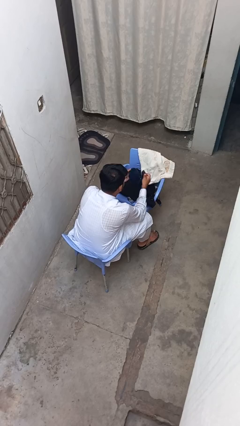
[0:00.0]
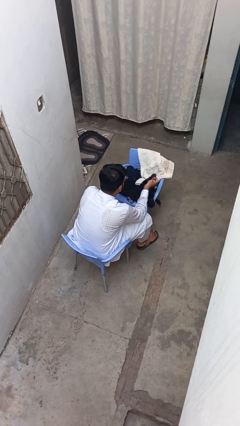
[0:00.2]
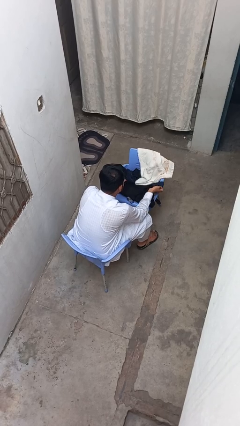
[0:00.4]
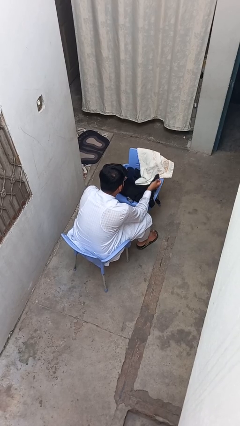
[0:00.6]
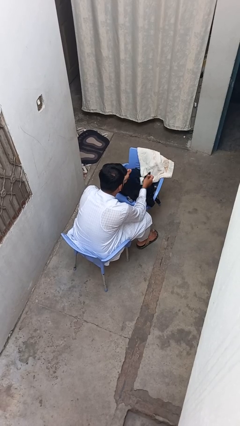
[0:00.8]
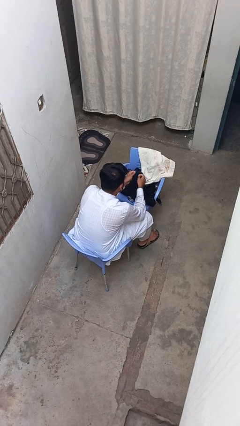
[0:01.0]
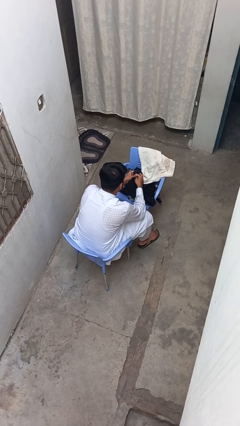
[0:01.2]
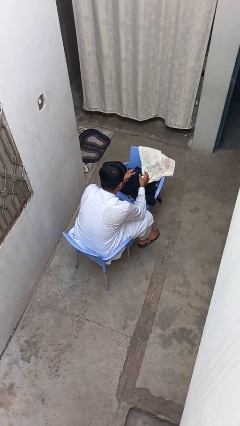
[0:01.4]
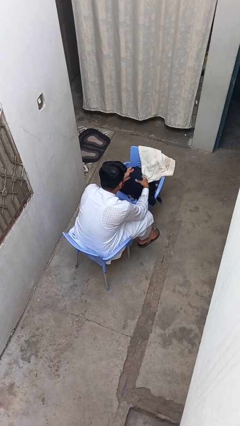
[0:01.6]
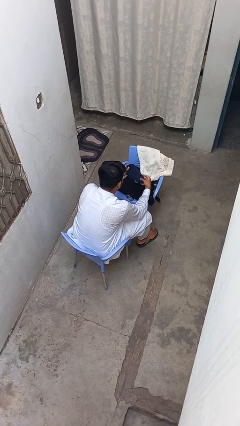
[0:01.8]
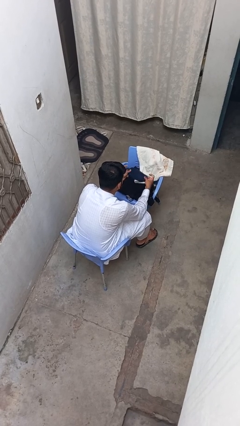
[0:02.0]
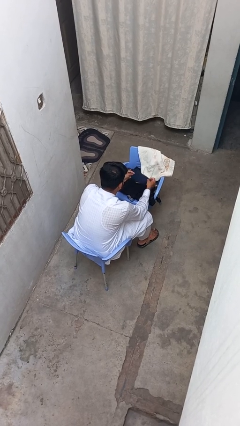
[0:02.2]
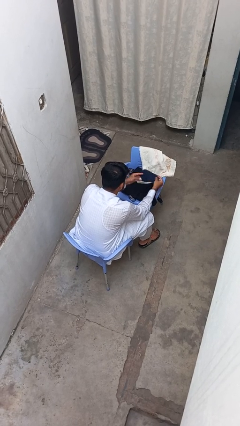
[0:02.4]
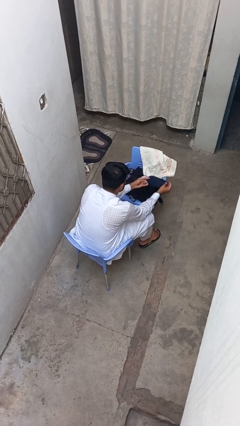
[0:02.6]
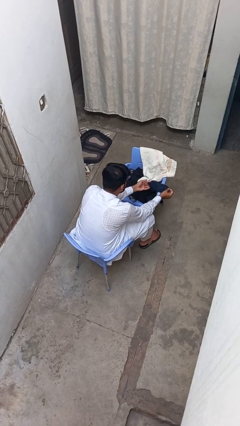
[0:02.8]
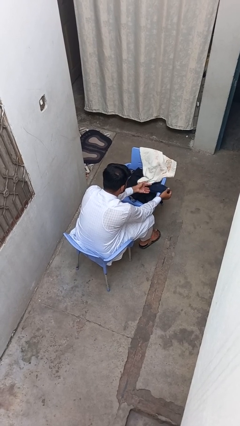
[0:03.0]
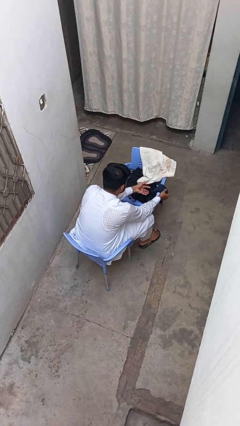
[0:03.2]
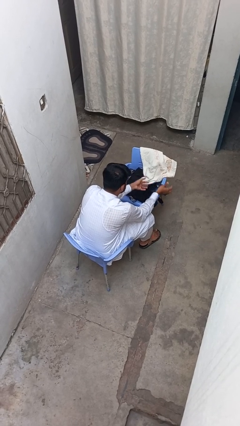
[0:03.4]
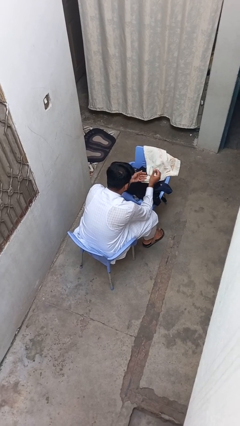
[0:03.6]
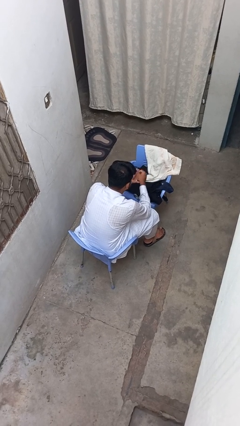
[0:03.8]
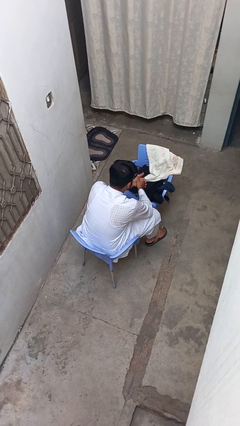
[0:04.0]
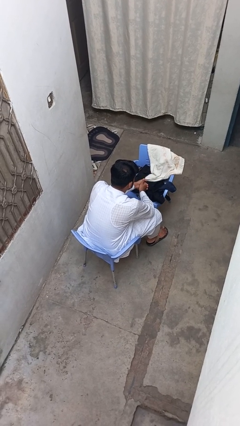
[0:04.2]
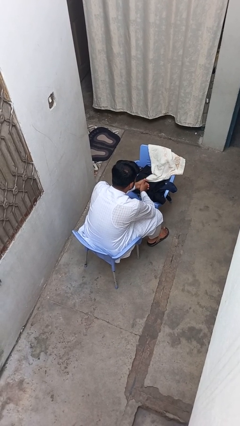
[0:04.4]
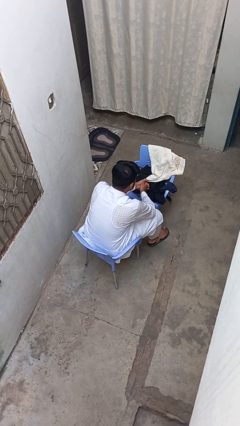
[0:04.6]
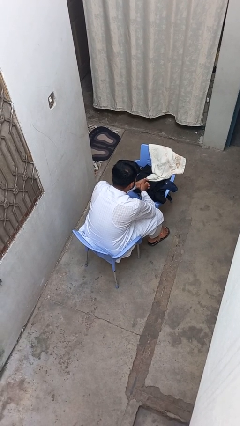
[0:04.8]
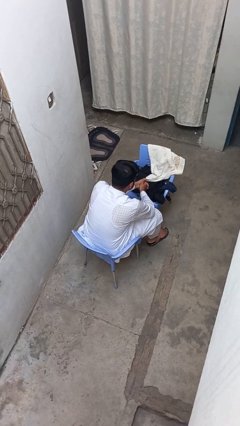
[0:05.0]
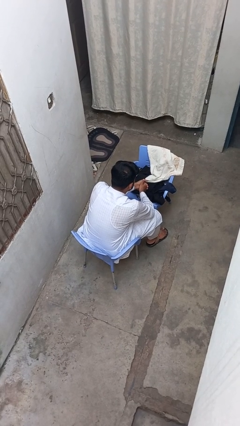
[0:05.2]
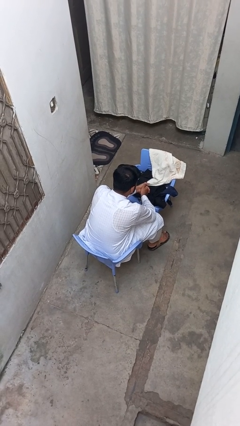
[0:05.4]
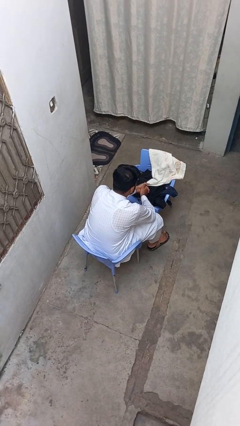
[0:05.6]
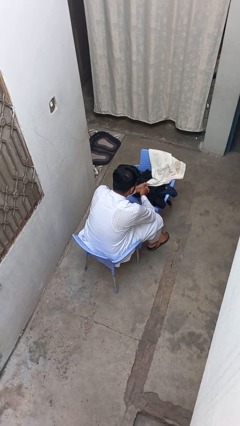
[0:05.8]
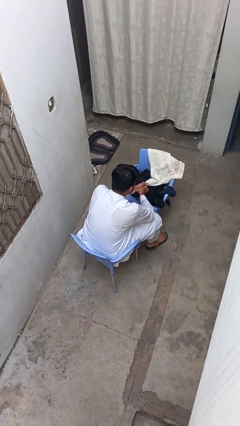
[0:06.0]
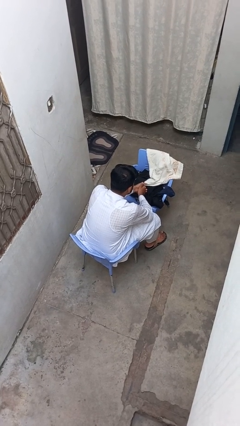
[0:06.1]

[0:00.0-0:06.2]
person folds socks

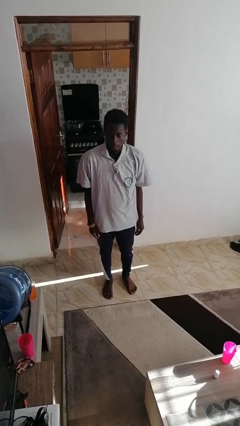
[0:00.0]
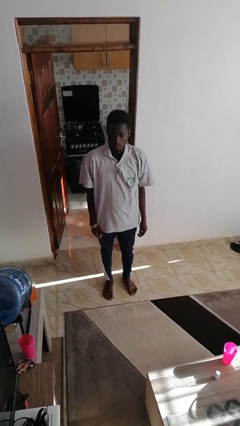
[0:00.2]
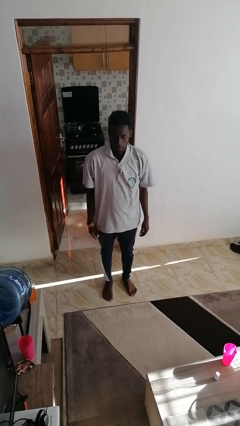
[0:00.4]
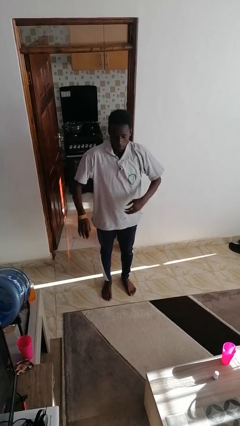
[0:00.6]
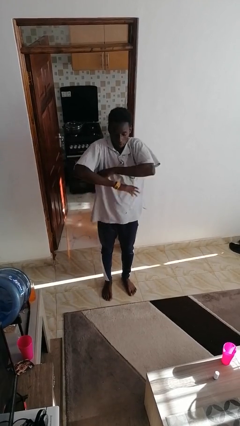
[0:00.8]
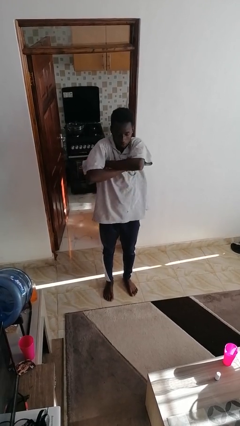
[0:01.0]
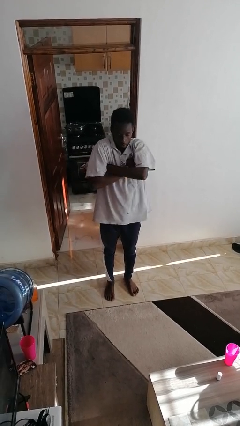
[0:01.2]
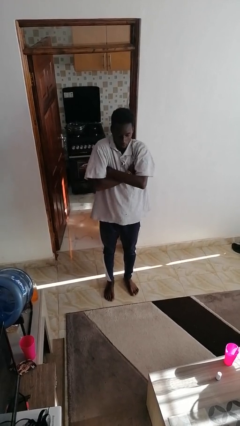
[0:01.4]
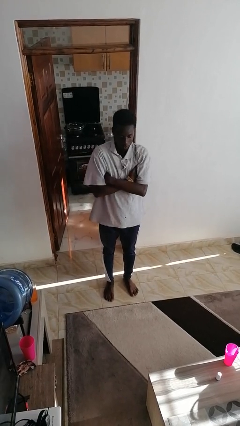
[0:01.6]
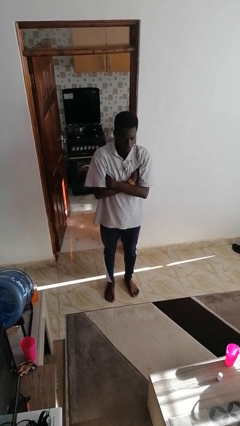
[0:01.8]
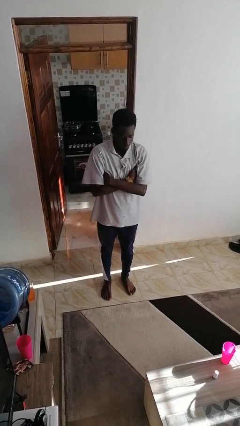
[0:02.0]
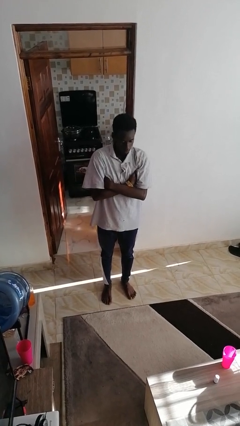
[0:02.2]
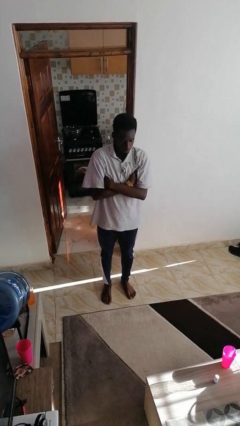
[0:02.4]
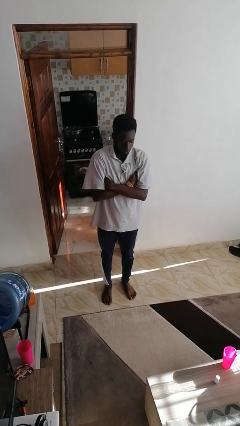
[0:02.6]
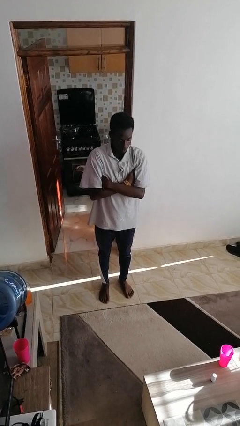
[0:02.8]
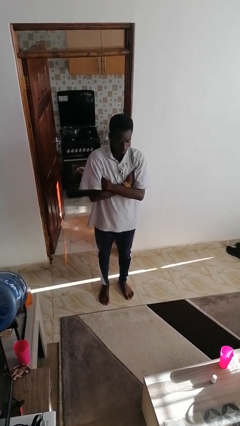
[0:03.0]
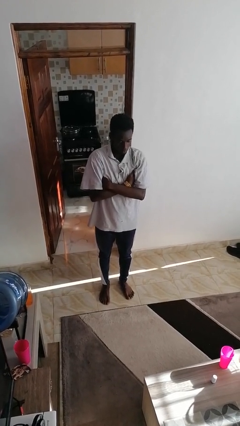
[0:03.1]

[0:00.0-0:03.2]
person crosses arms

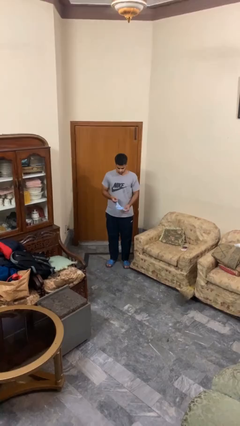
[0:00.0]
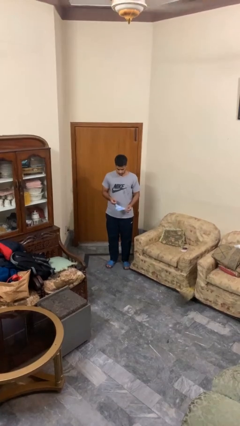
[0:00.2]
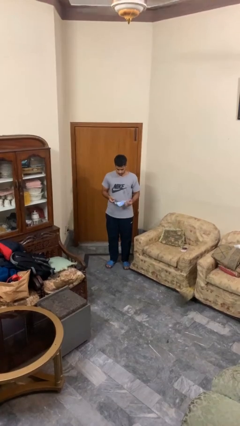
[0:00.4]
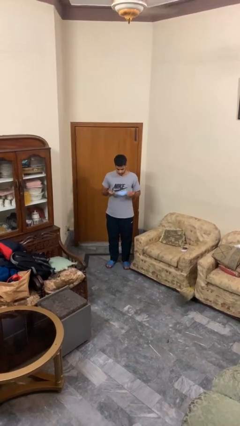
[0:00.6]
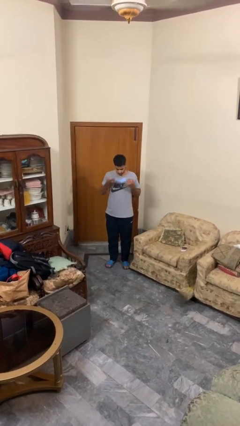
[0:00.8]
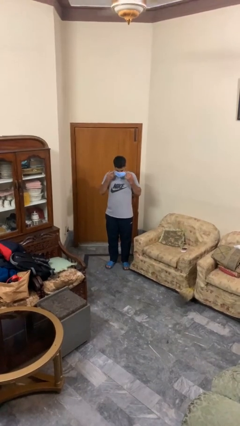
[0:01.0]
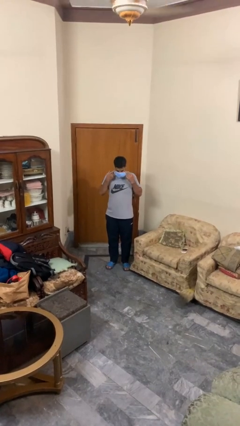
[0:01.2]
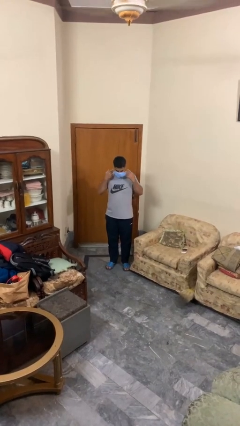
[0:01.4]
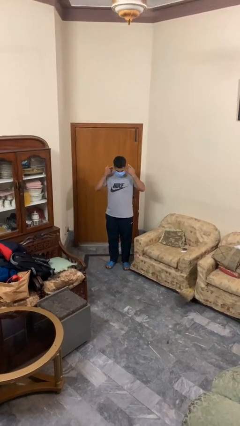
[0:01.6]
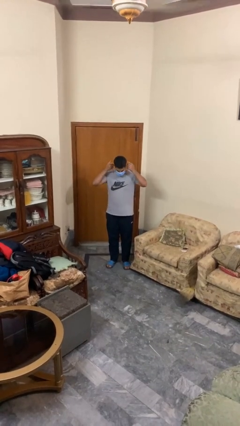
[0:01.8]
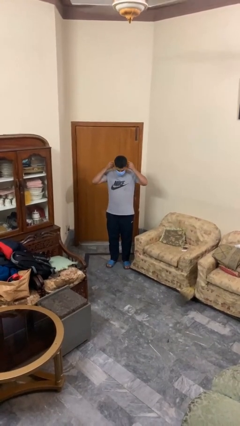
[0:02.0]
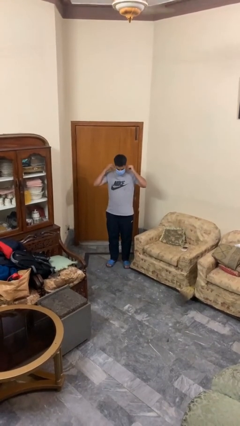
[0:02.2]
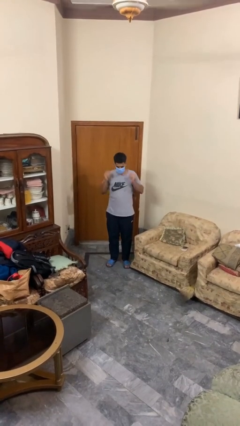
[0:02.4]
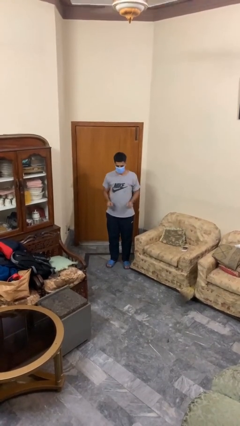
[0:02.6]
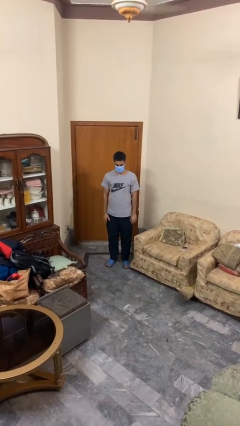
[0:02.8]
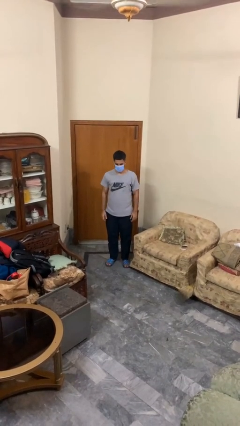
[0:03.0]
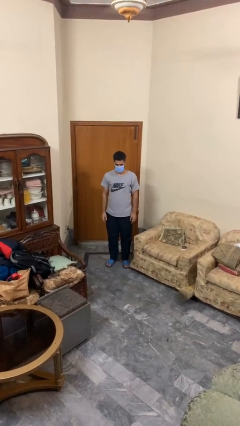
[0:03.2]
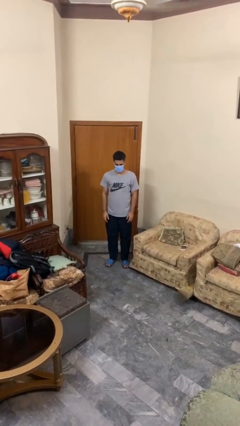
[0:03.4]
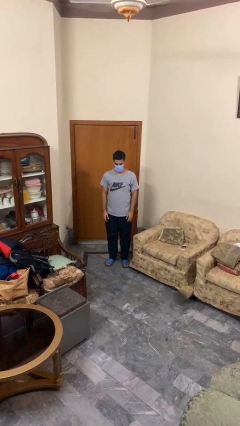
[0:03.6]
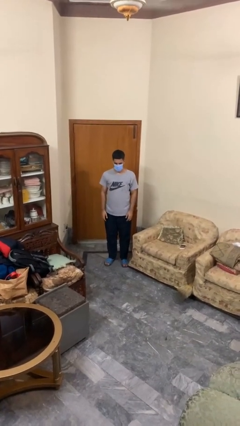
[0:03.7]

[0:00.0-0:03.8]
person puts on facemask

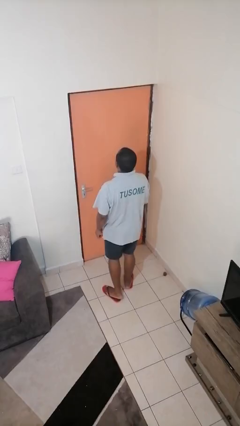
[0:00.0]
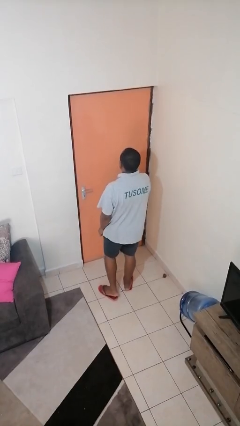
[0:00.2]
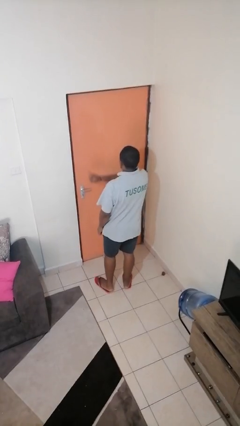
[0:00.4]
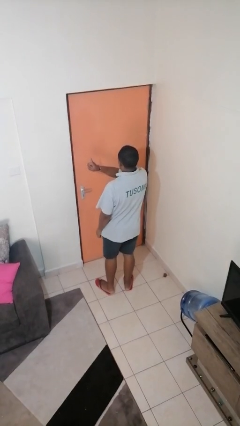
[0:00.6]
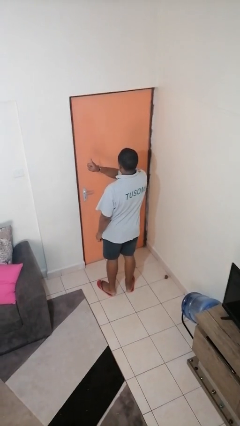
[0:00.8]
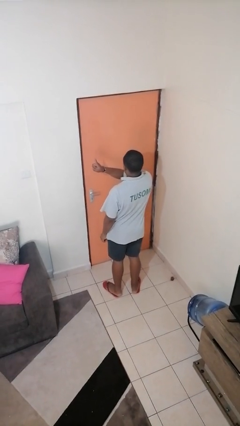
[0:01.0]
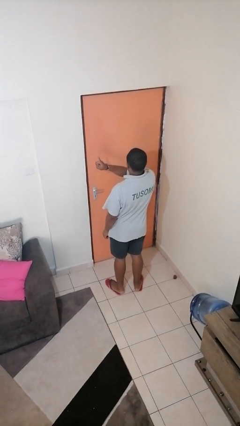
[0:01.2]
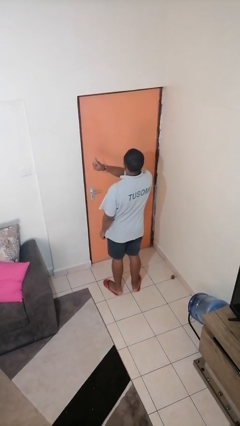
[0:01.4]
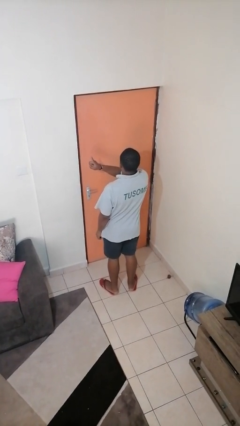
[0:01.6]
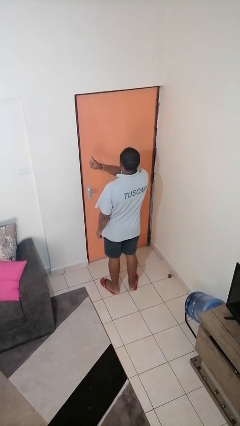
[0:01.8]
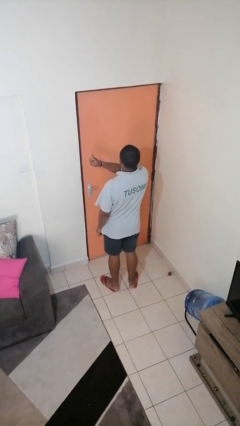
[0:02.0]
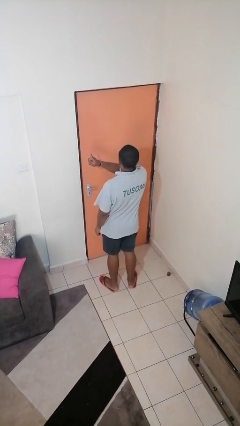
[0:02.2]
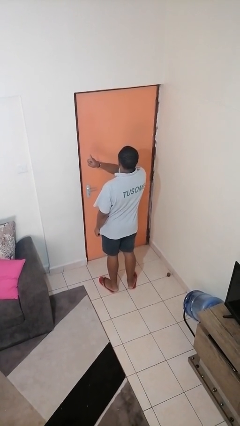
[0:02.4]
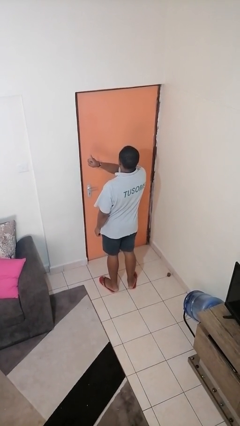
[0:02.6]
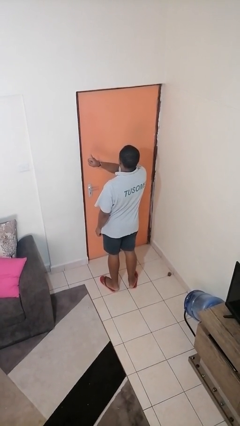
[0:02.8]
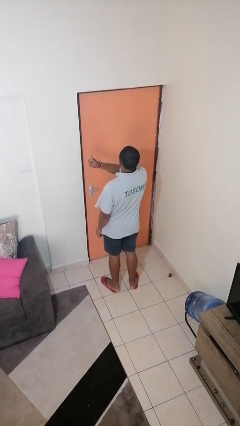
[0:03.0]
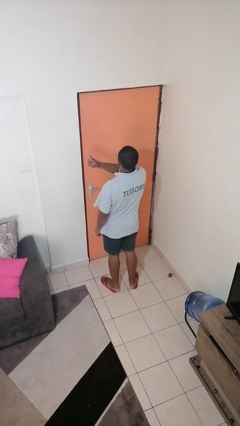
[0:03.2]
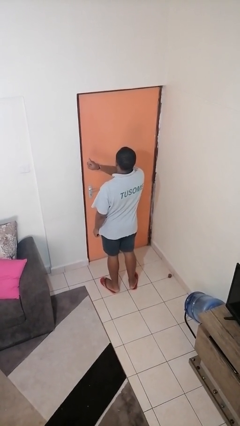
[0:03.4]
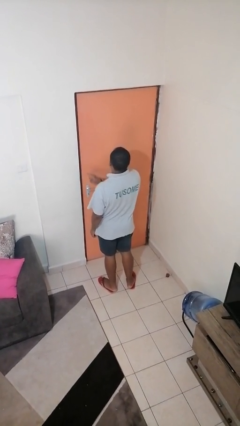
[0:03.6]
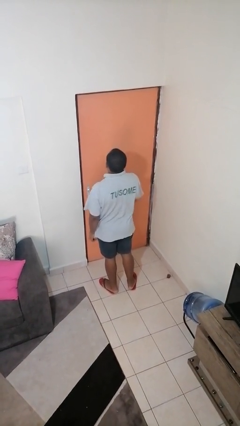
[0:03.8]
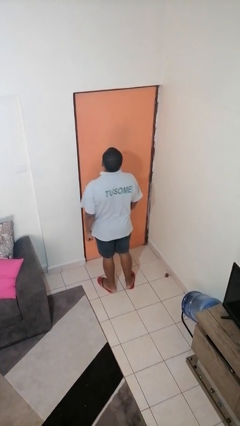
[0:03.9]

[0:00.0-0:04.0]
person gestures number one
